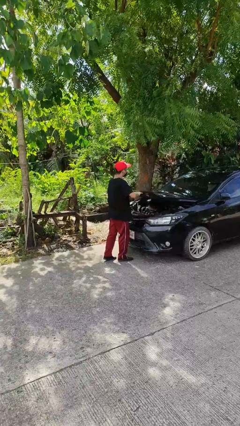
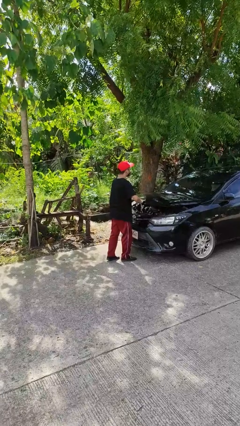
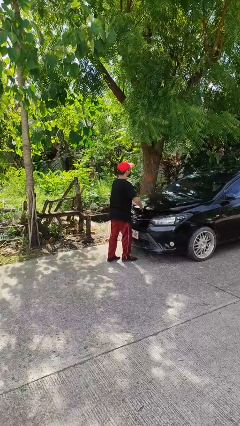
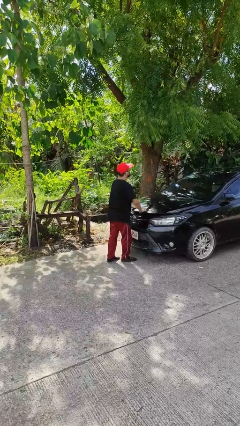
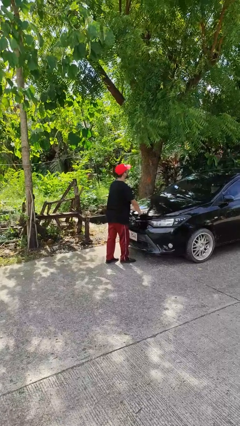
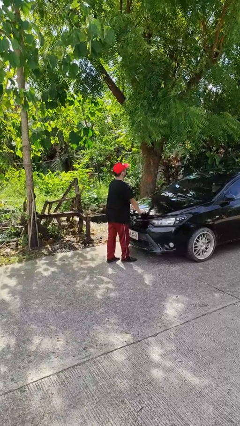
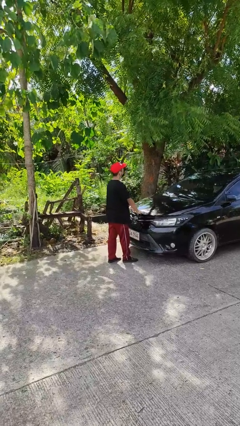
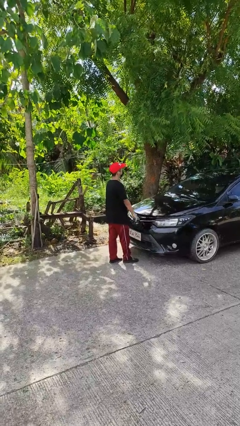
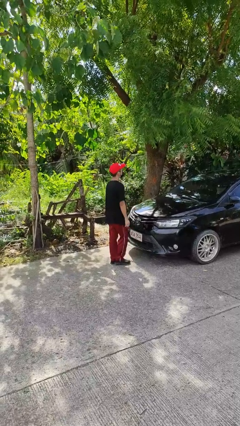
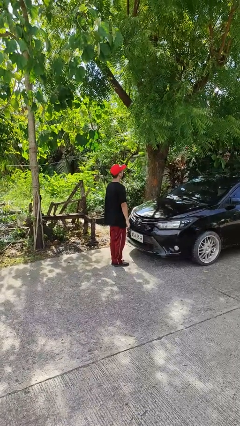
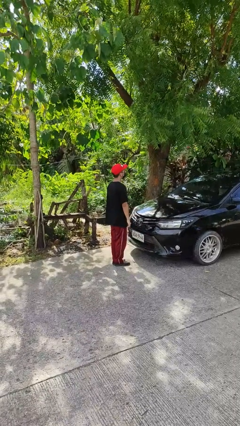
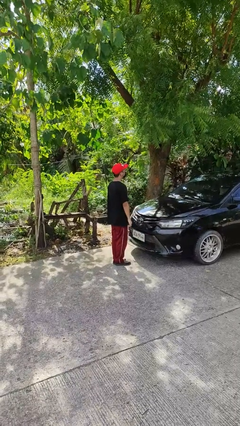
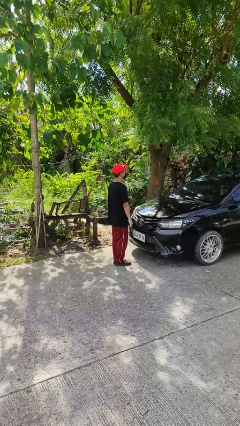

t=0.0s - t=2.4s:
person closes car hood

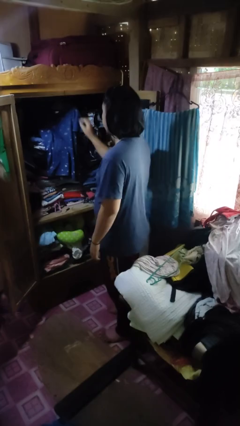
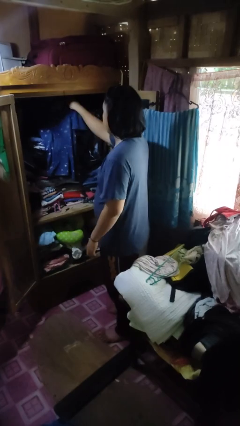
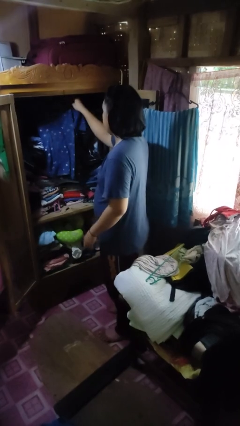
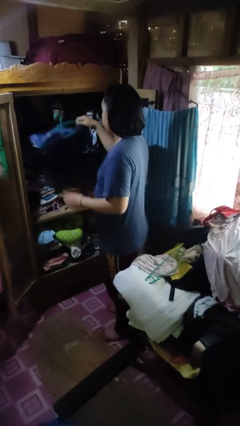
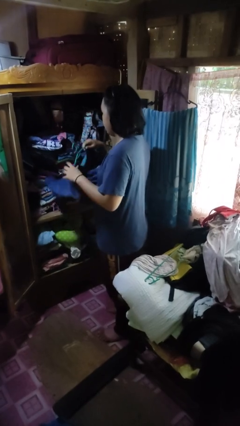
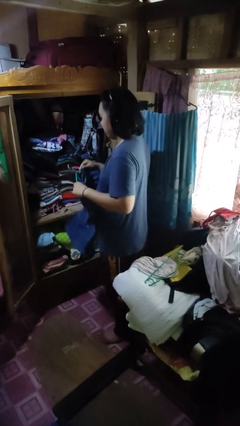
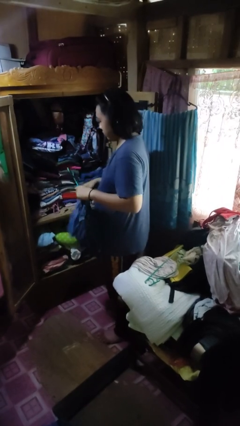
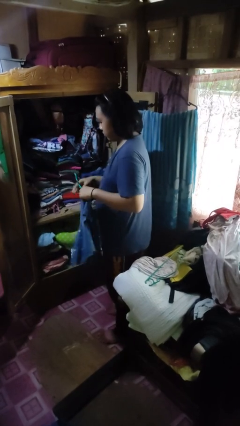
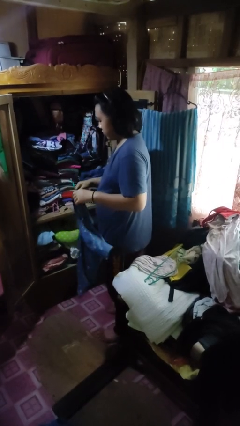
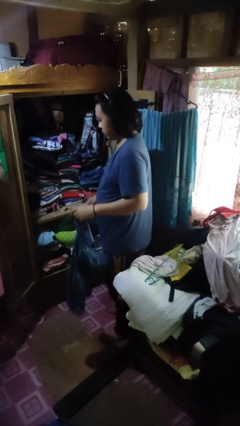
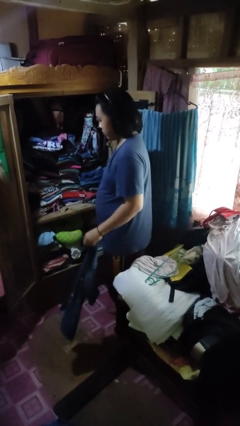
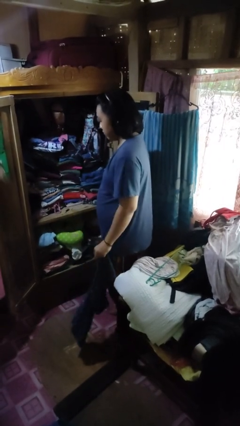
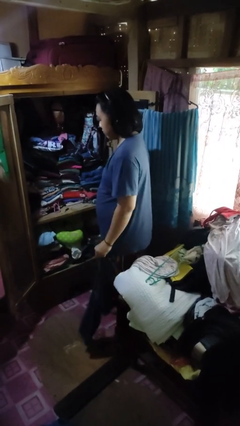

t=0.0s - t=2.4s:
person takes clothes from closet

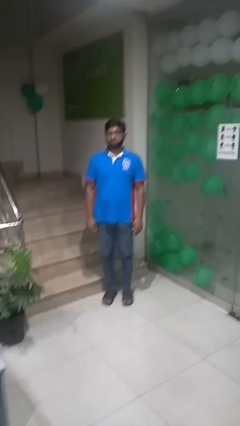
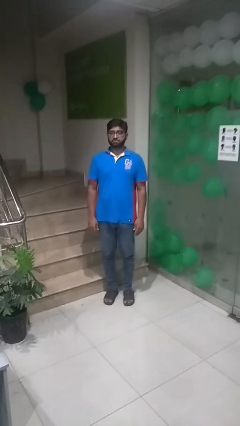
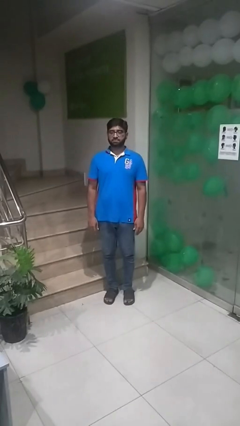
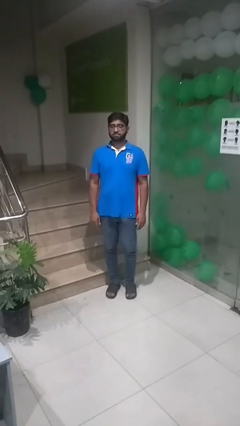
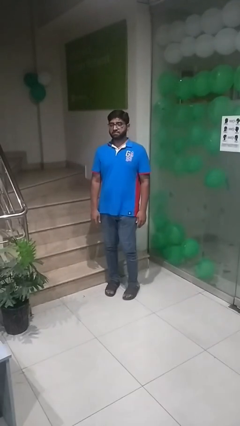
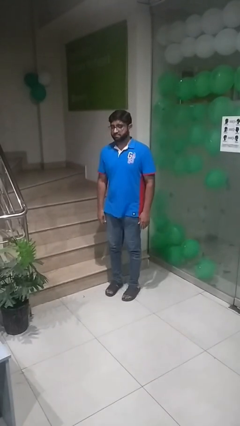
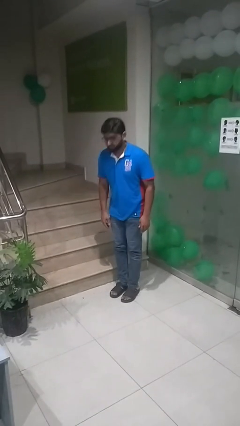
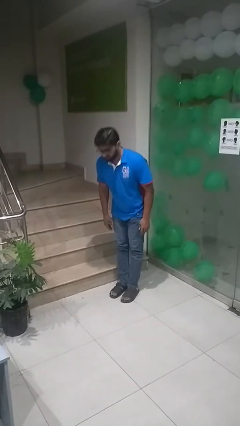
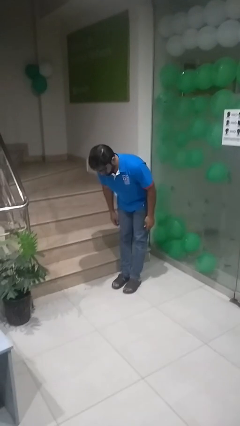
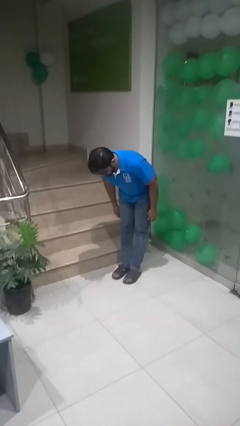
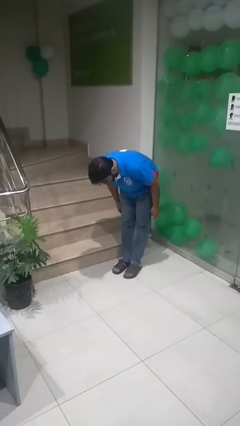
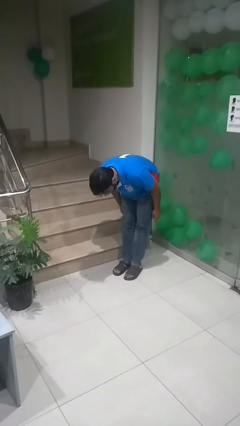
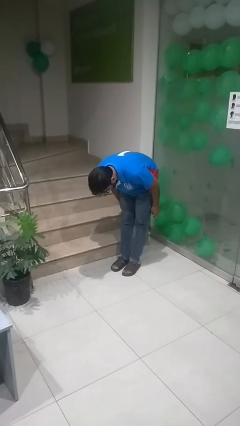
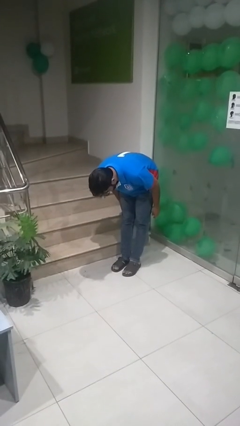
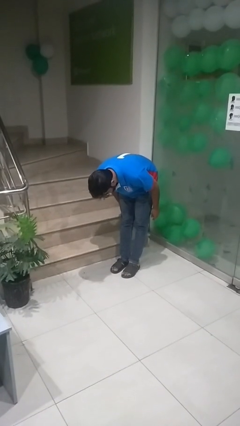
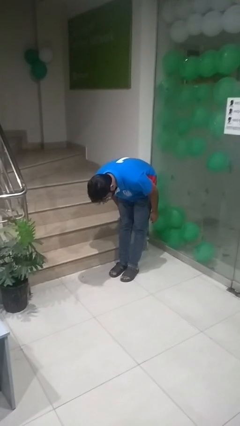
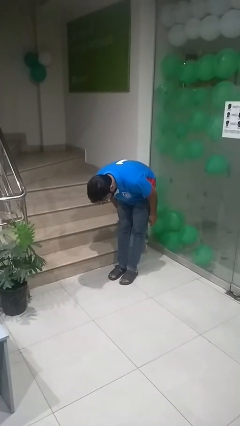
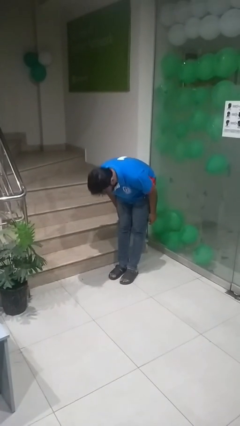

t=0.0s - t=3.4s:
person bows

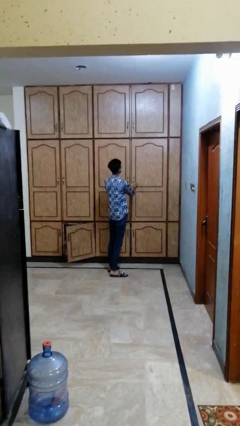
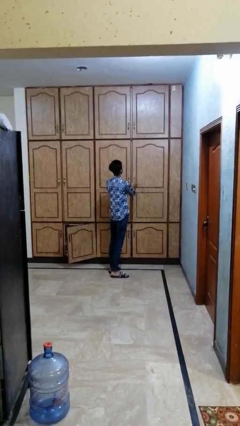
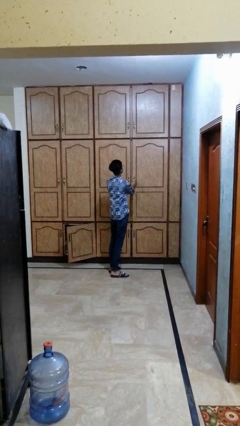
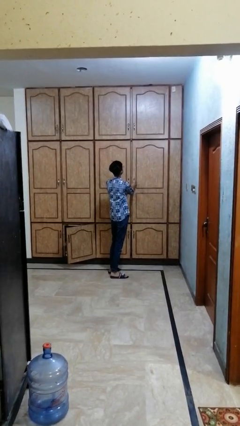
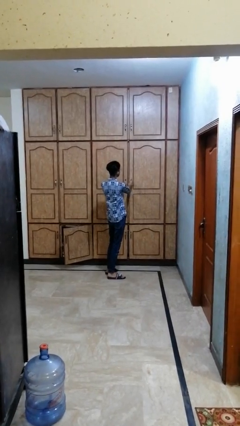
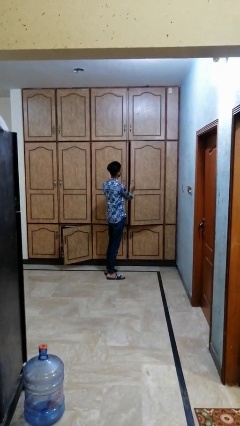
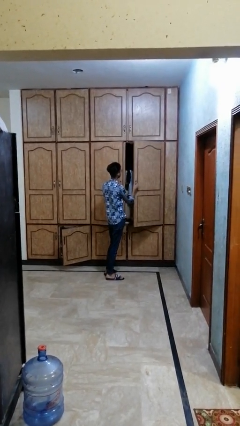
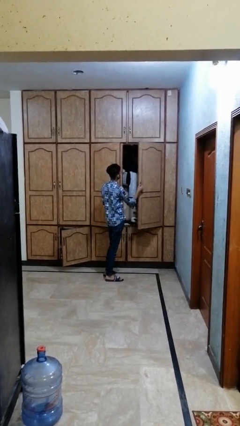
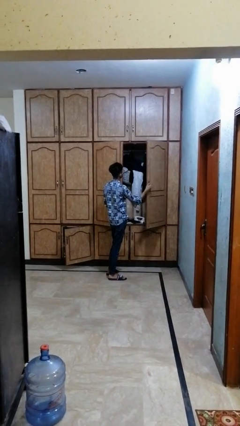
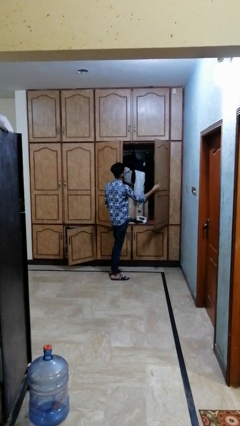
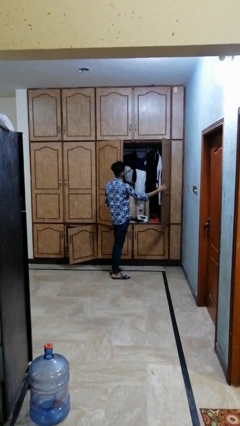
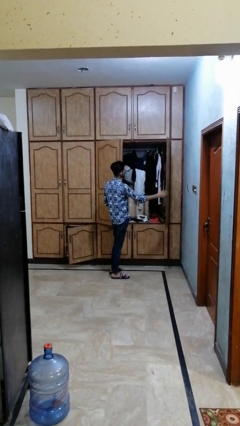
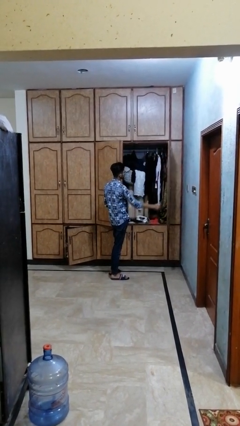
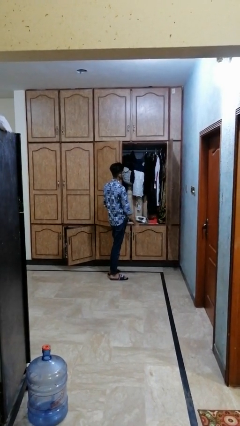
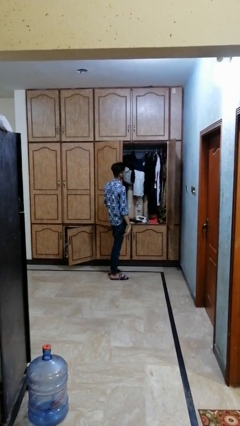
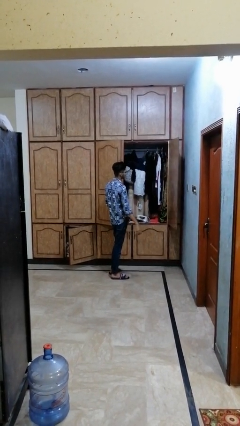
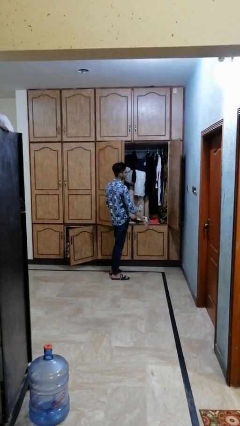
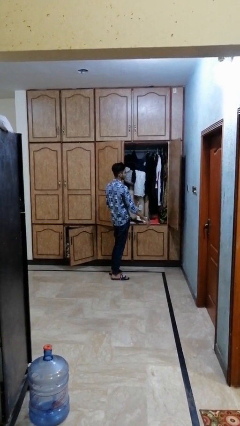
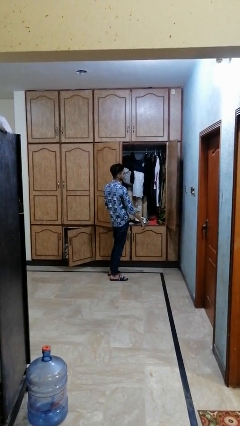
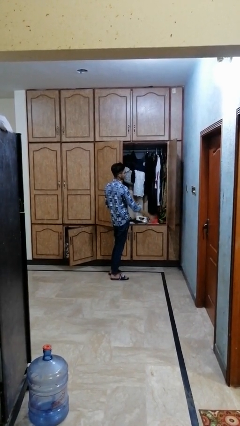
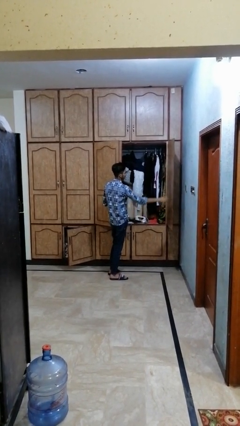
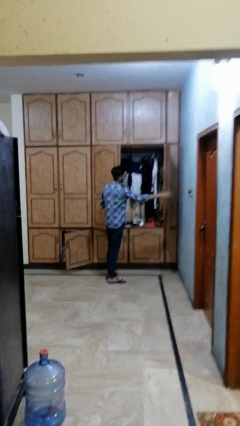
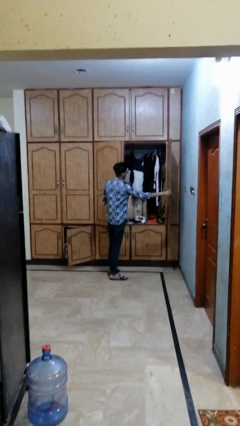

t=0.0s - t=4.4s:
person opens dresser drawer

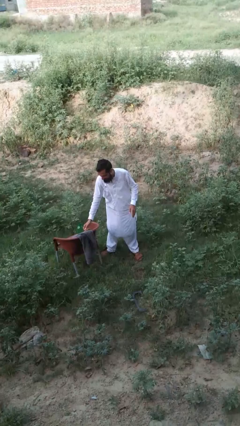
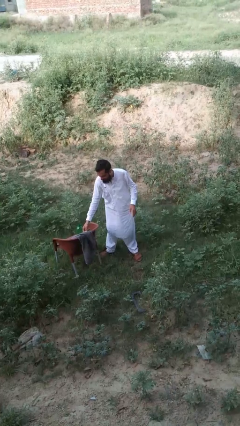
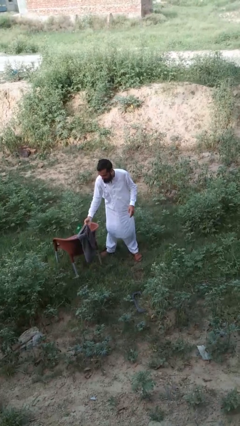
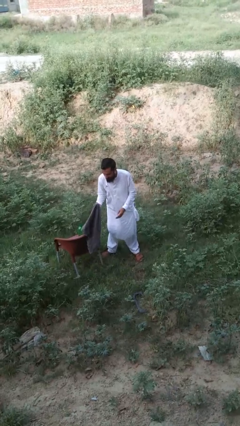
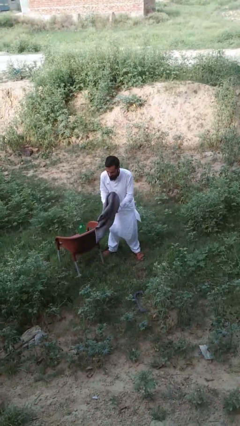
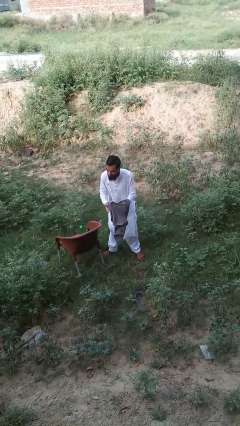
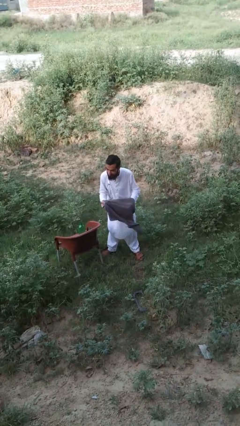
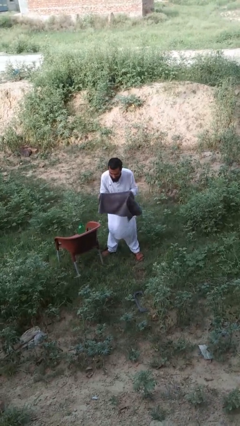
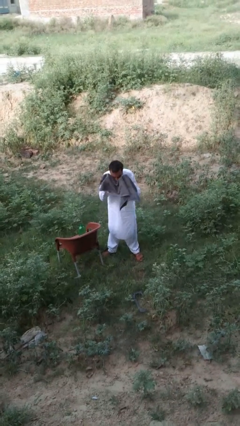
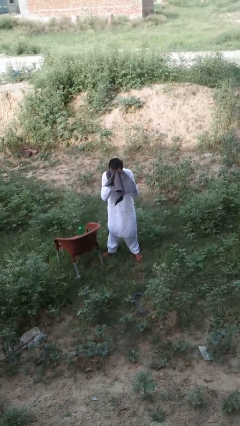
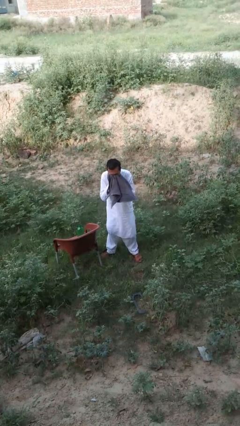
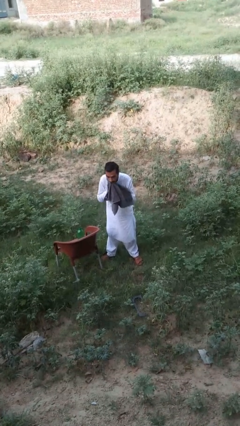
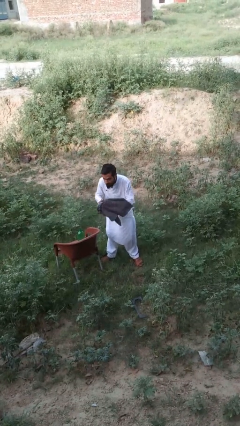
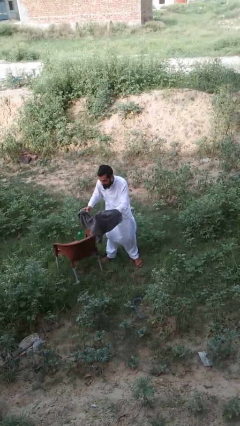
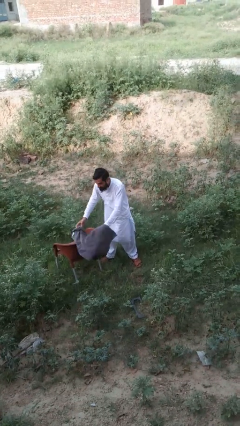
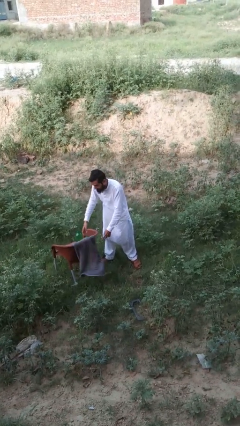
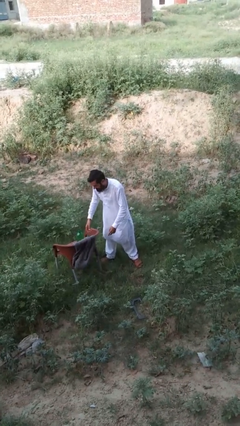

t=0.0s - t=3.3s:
person dries face with towel

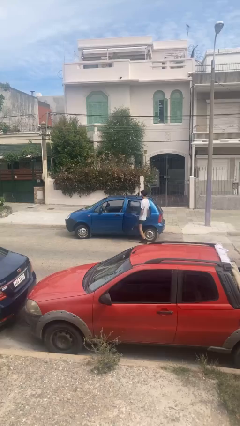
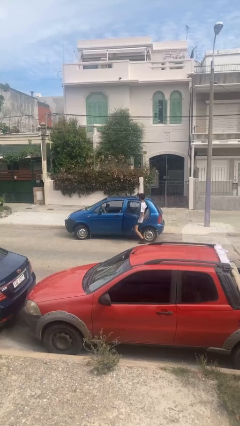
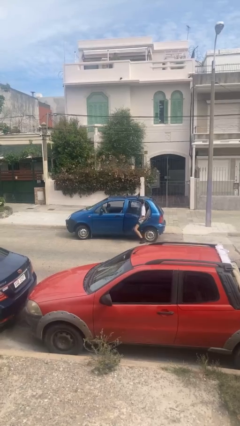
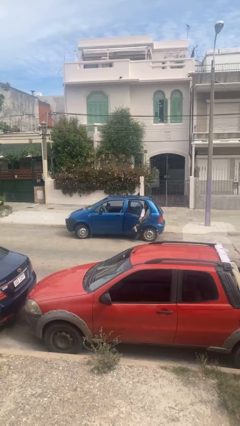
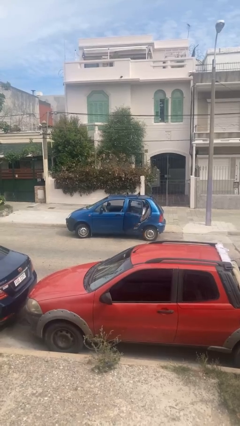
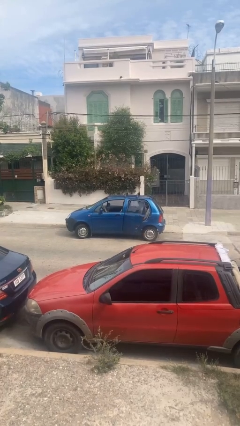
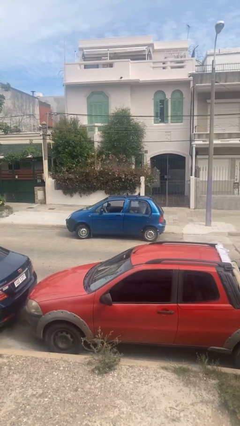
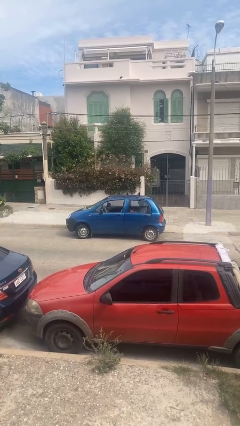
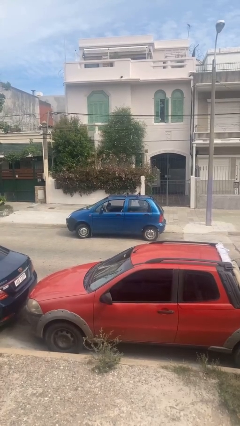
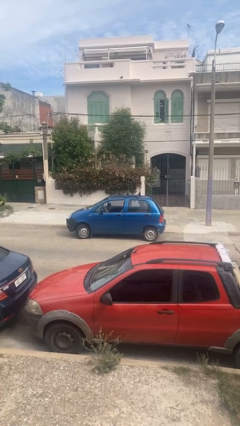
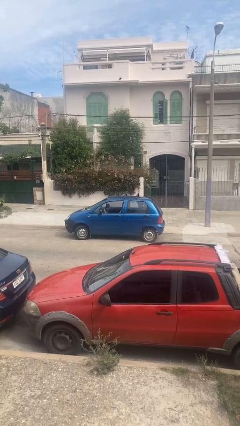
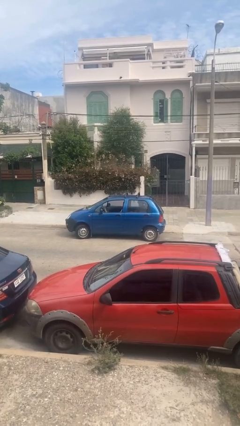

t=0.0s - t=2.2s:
car picks up person
